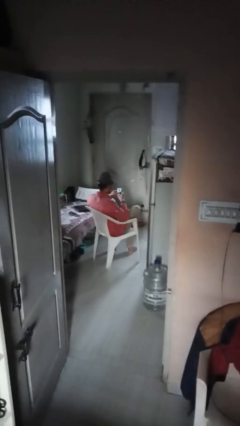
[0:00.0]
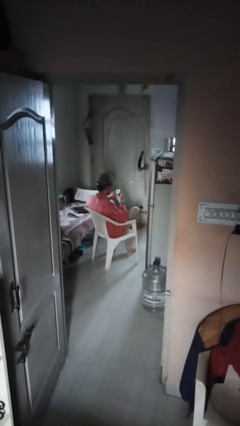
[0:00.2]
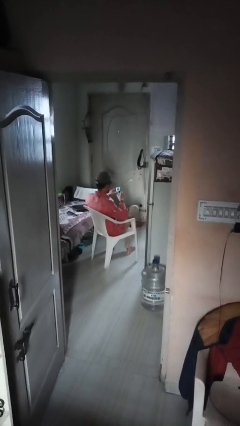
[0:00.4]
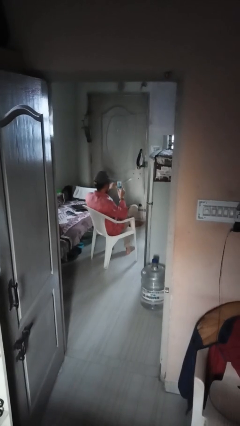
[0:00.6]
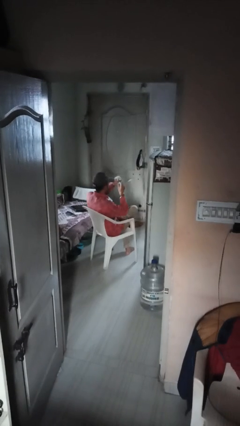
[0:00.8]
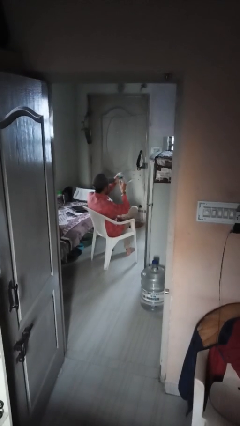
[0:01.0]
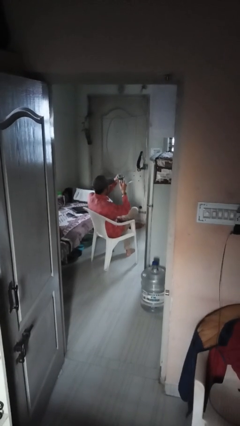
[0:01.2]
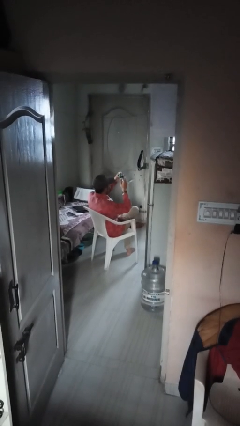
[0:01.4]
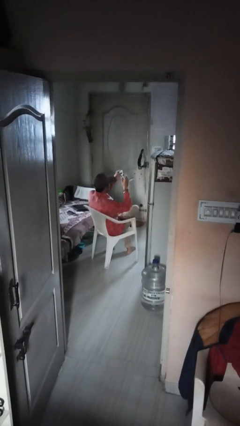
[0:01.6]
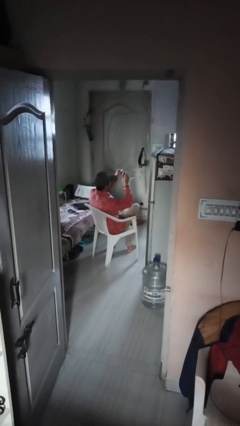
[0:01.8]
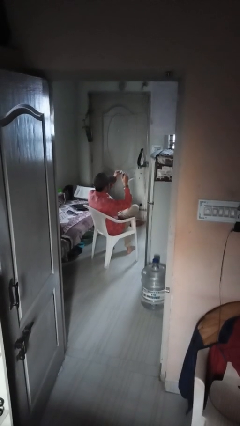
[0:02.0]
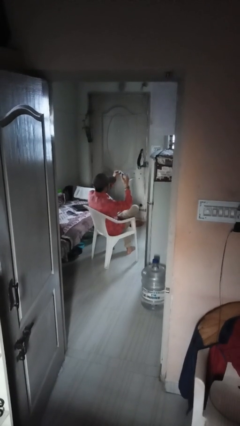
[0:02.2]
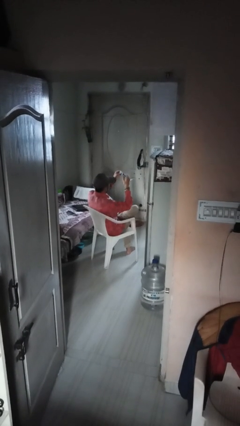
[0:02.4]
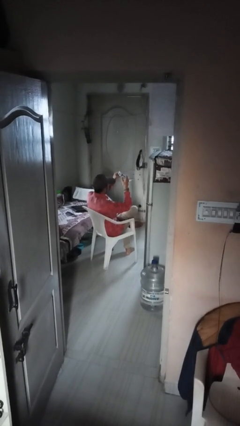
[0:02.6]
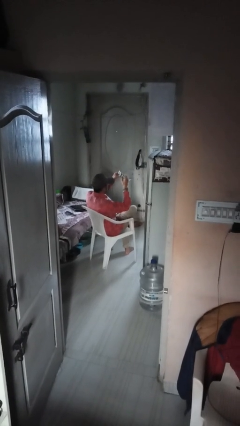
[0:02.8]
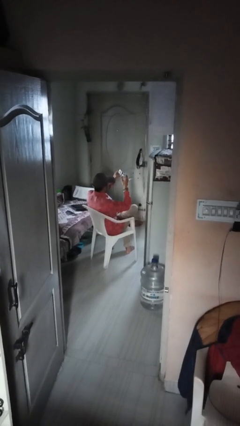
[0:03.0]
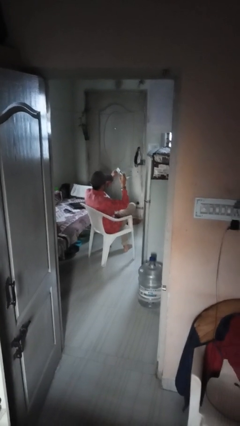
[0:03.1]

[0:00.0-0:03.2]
person squeezes object

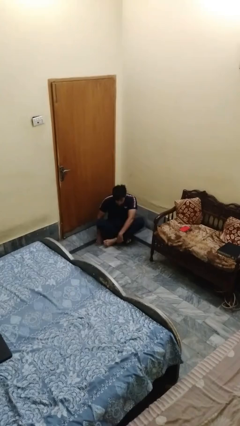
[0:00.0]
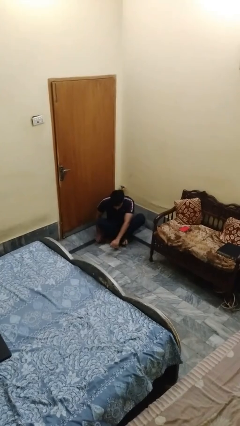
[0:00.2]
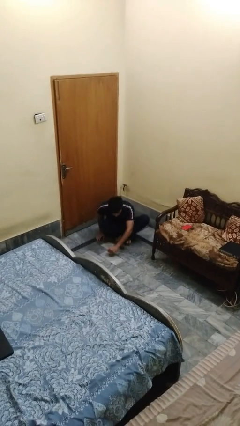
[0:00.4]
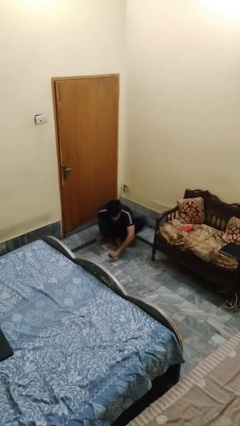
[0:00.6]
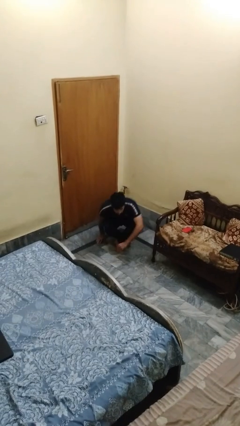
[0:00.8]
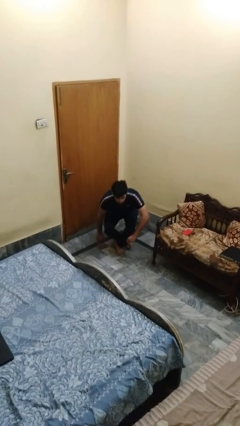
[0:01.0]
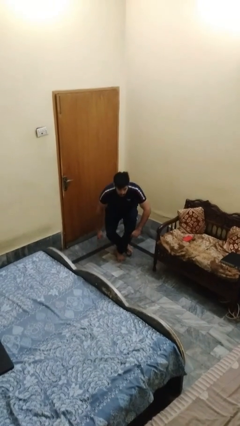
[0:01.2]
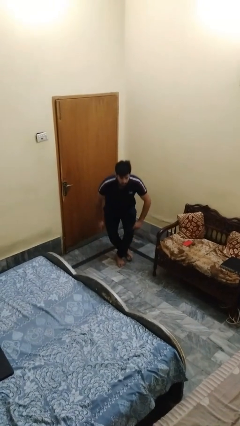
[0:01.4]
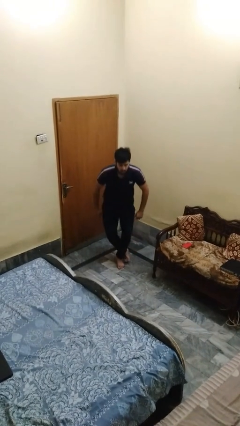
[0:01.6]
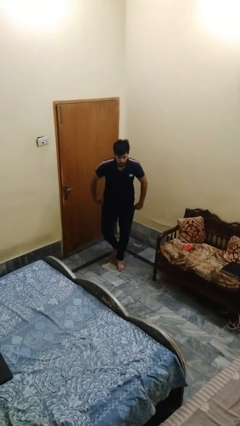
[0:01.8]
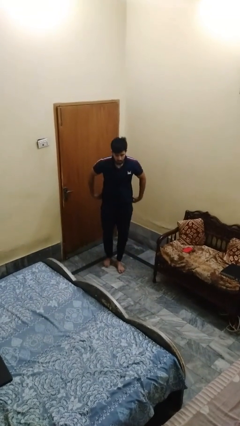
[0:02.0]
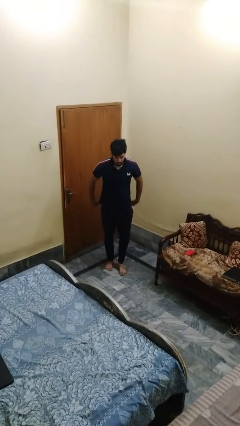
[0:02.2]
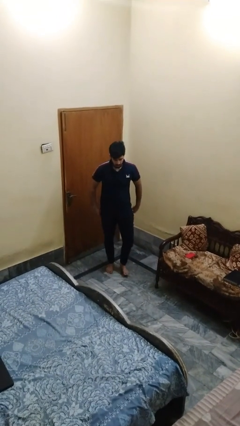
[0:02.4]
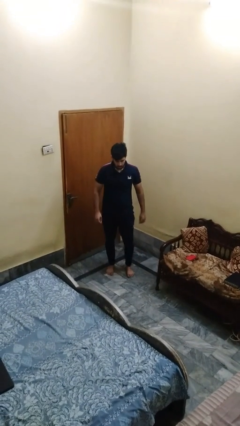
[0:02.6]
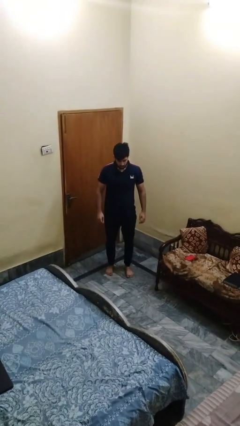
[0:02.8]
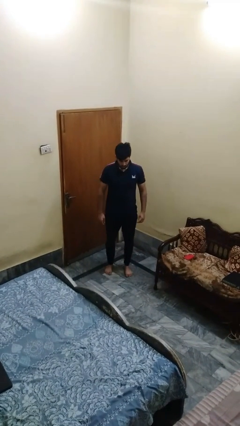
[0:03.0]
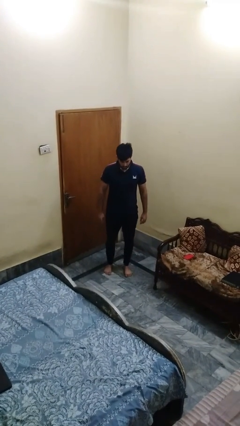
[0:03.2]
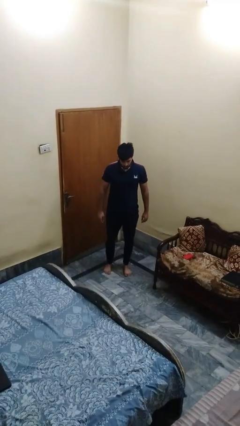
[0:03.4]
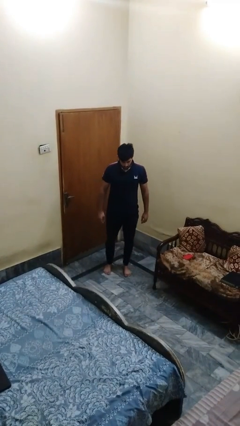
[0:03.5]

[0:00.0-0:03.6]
person stands up from floor

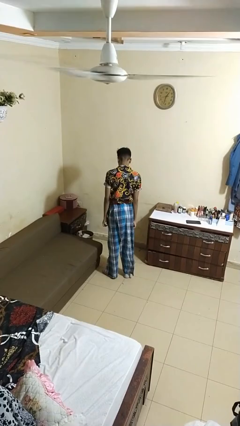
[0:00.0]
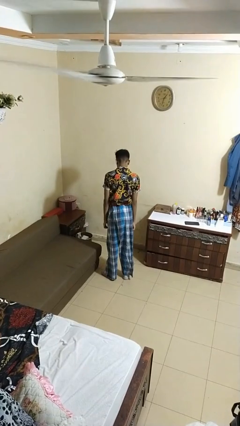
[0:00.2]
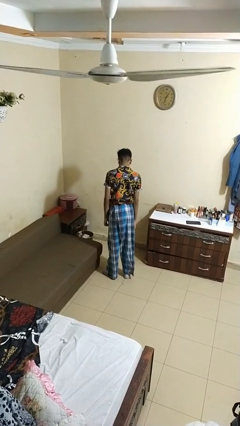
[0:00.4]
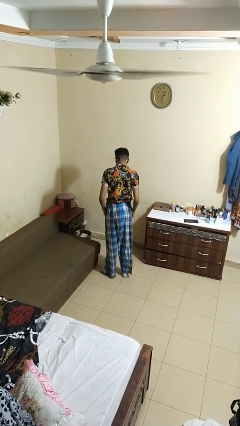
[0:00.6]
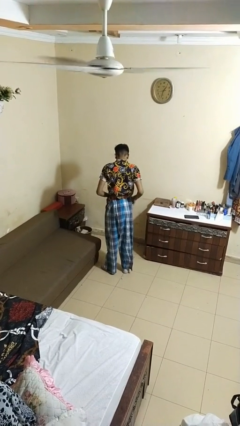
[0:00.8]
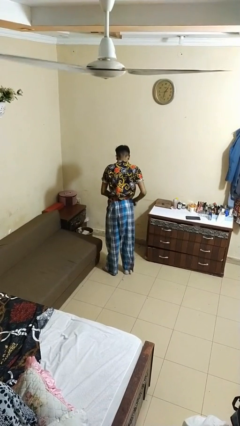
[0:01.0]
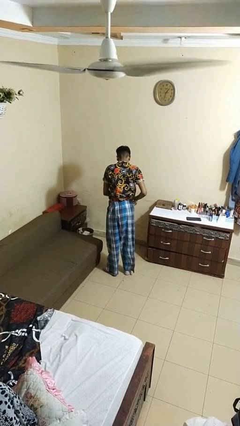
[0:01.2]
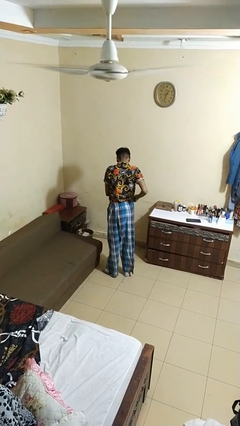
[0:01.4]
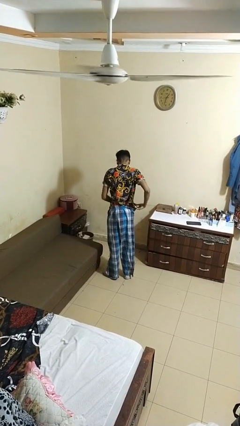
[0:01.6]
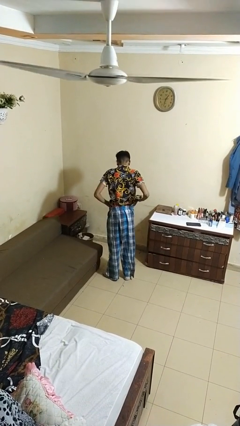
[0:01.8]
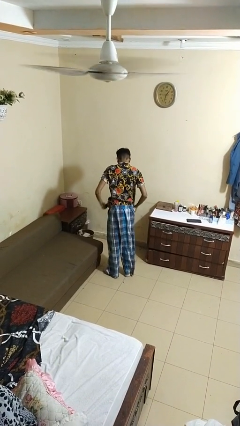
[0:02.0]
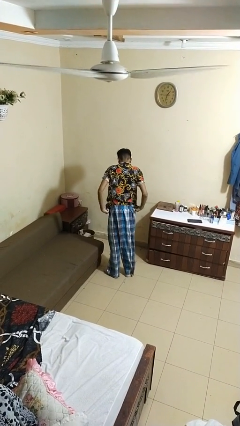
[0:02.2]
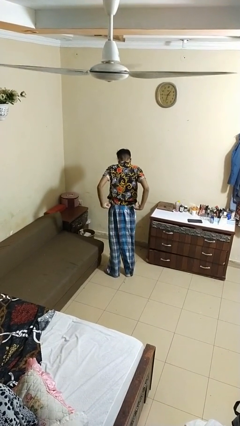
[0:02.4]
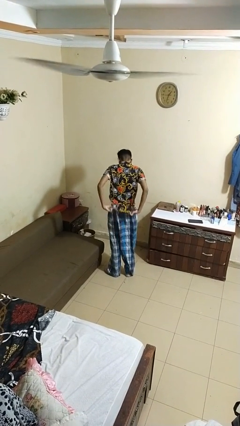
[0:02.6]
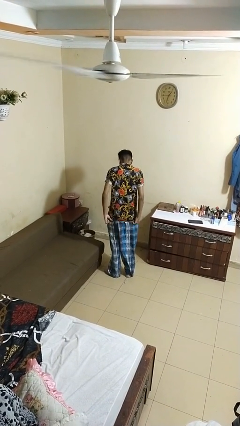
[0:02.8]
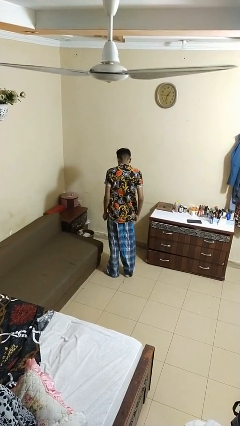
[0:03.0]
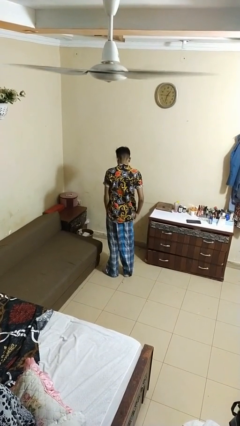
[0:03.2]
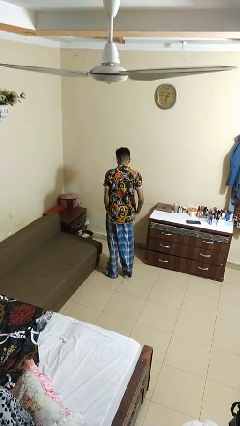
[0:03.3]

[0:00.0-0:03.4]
person untucks shirt

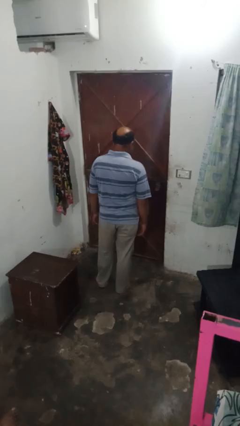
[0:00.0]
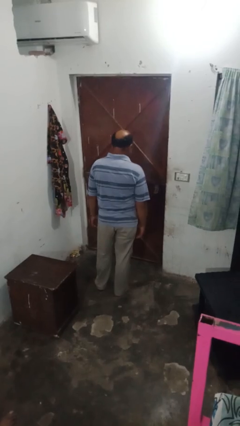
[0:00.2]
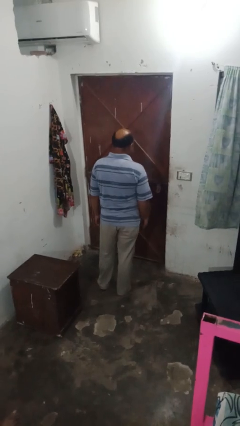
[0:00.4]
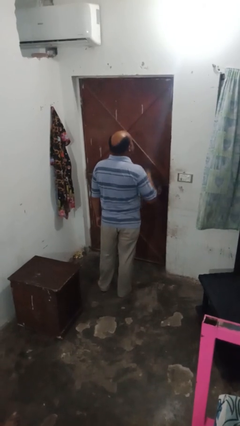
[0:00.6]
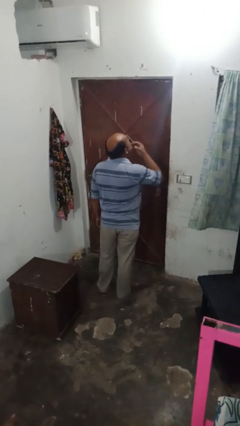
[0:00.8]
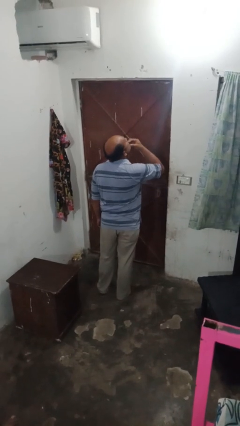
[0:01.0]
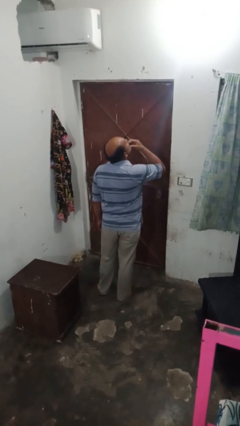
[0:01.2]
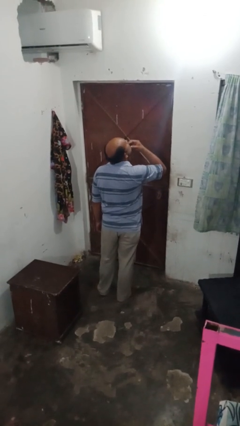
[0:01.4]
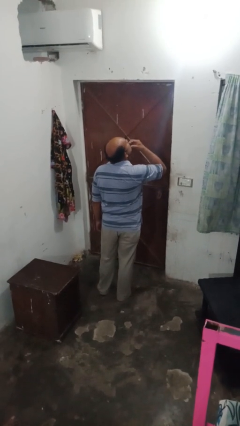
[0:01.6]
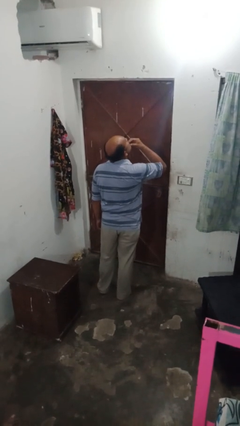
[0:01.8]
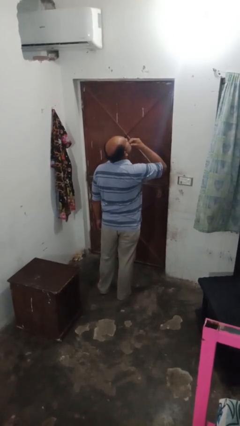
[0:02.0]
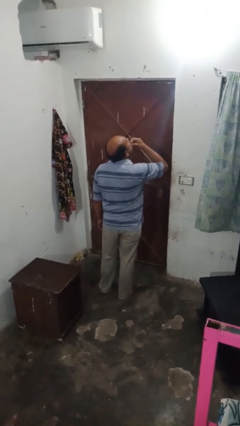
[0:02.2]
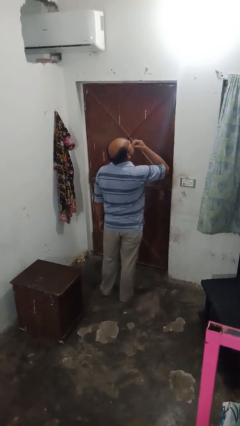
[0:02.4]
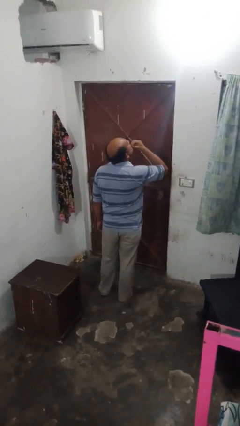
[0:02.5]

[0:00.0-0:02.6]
person strokes chin

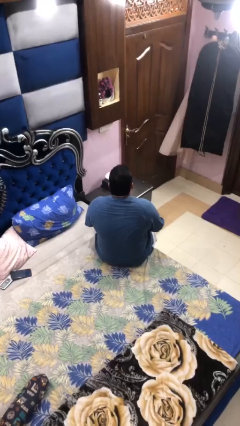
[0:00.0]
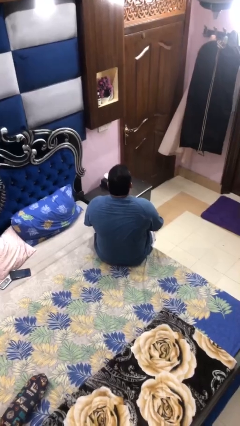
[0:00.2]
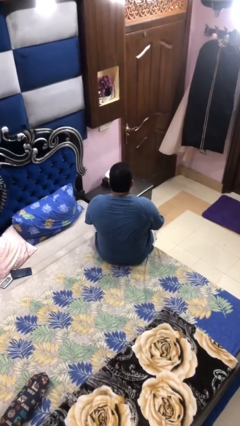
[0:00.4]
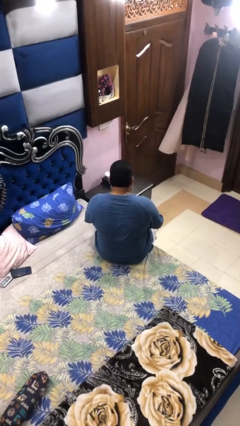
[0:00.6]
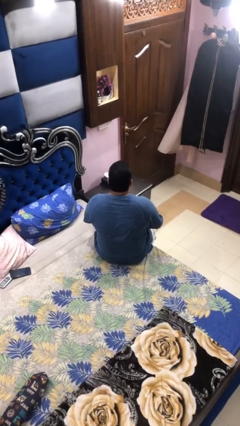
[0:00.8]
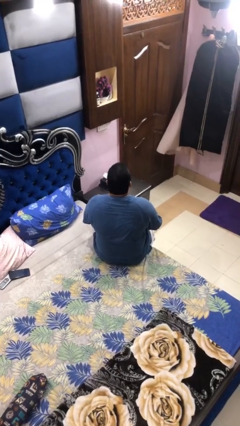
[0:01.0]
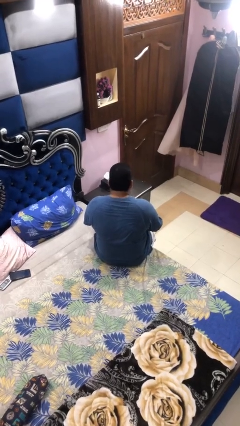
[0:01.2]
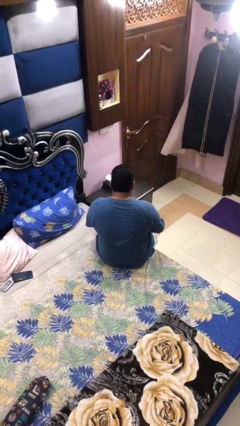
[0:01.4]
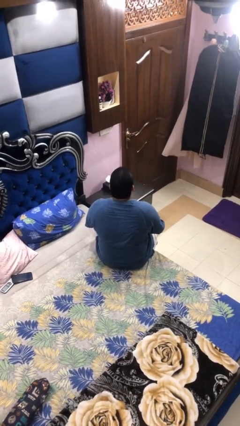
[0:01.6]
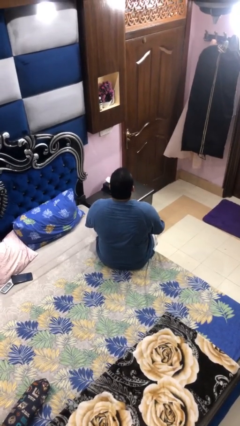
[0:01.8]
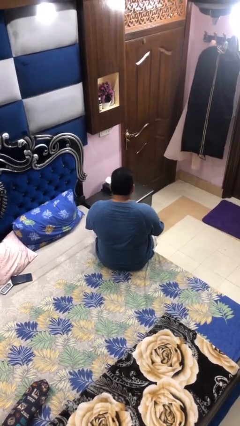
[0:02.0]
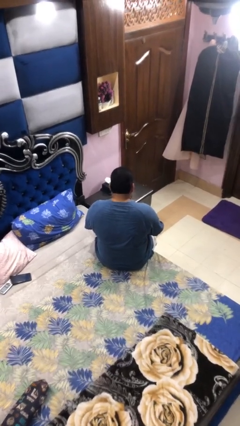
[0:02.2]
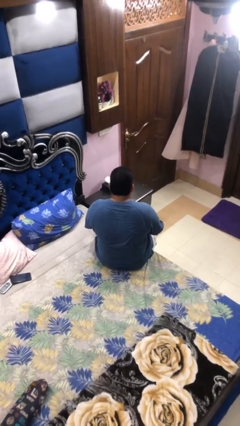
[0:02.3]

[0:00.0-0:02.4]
person nods head

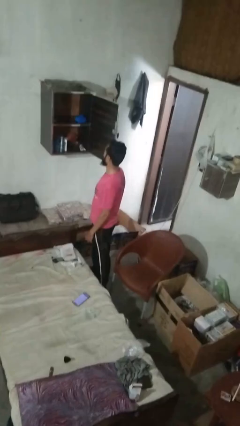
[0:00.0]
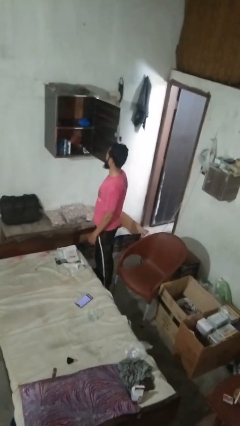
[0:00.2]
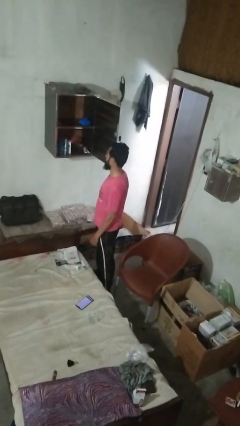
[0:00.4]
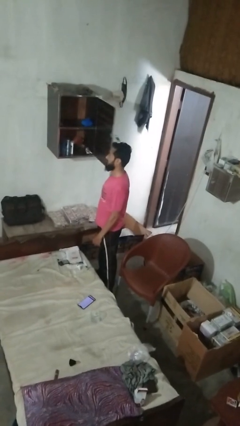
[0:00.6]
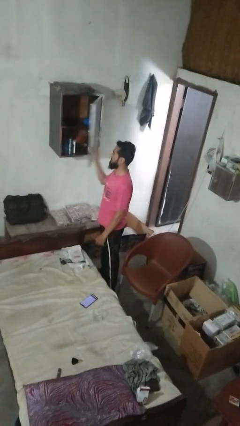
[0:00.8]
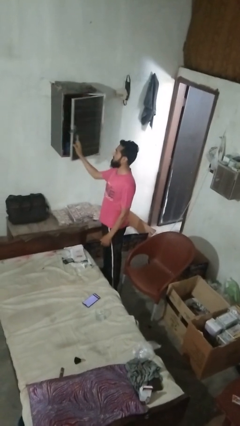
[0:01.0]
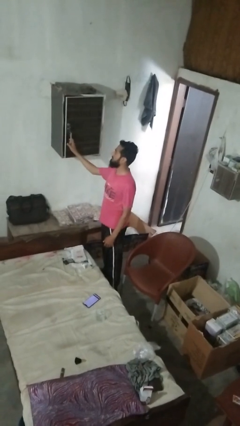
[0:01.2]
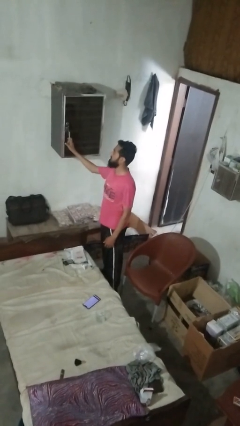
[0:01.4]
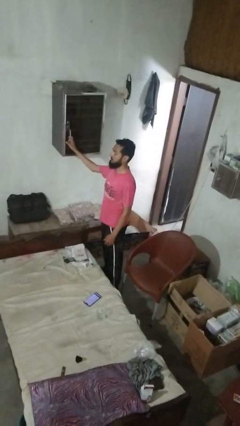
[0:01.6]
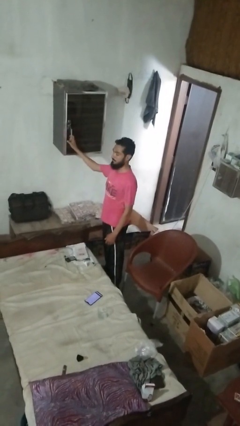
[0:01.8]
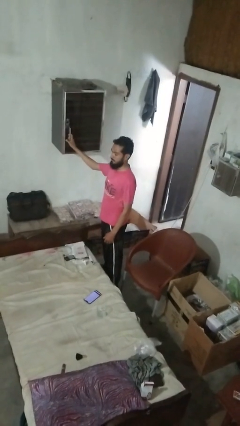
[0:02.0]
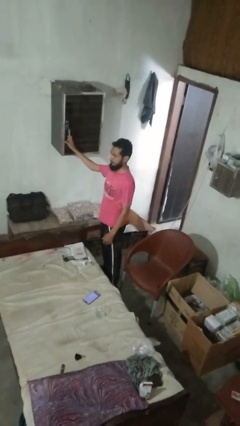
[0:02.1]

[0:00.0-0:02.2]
person closes closet door
